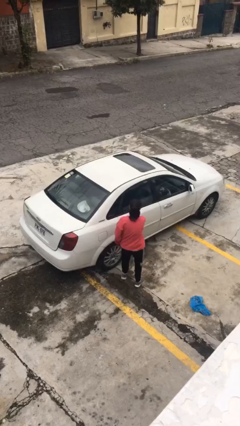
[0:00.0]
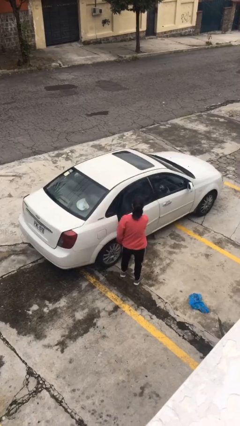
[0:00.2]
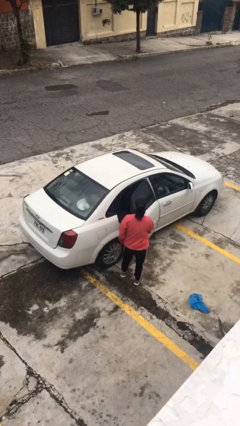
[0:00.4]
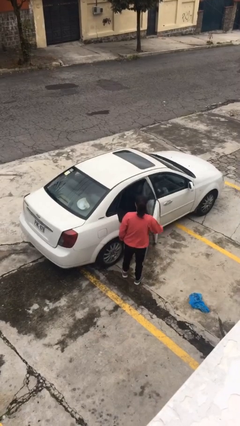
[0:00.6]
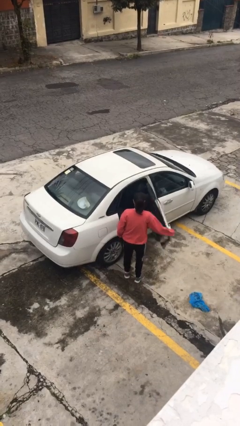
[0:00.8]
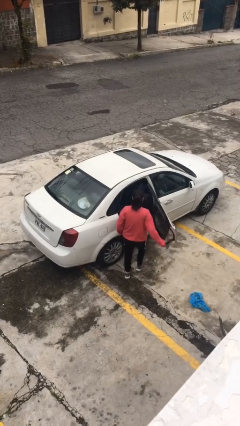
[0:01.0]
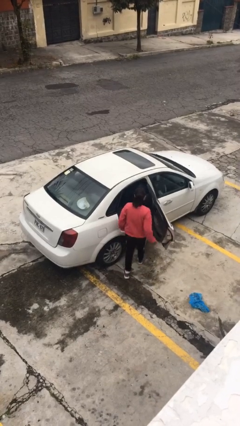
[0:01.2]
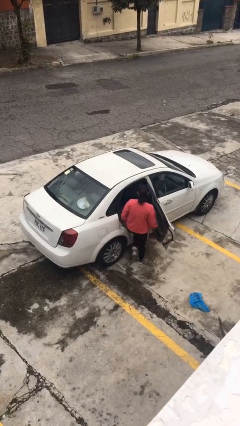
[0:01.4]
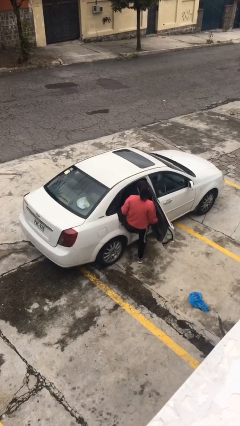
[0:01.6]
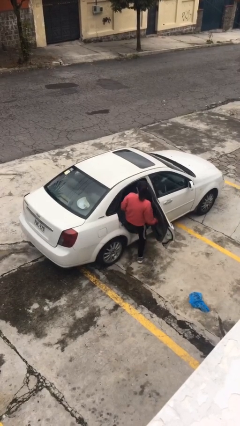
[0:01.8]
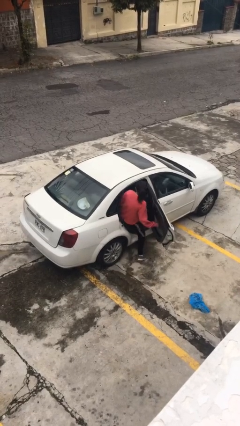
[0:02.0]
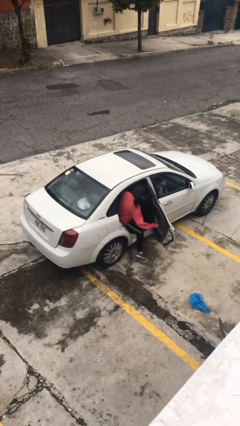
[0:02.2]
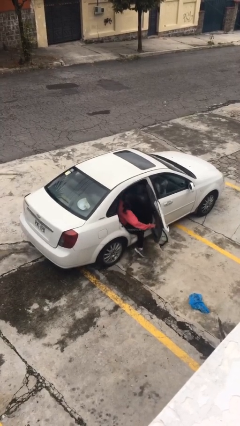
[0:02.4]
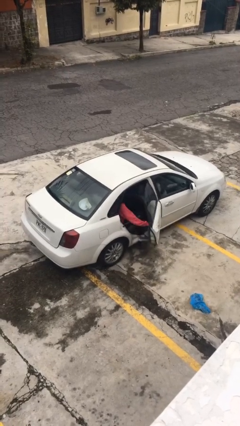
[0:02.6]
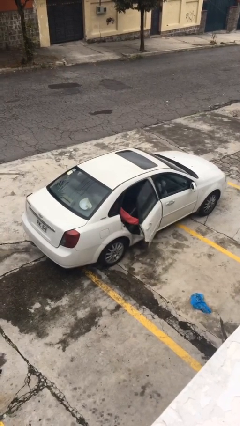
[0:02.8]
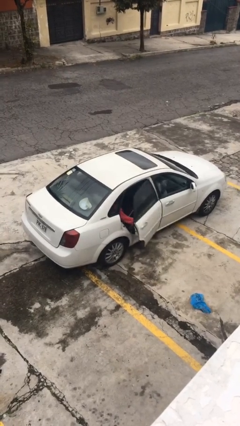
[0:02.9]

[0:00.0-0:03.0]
car picks up person

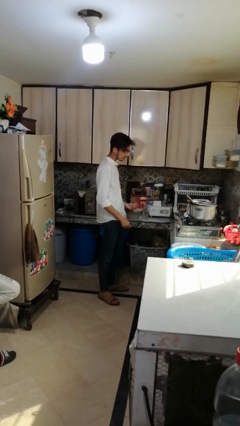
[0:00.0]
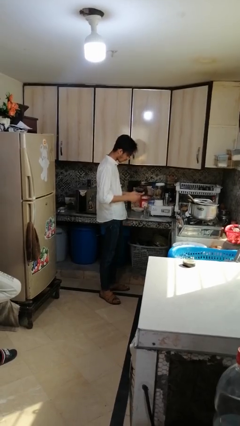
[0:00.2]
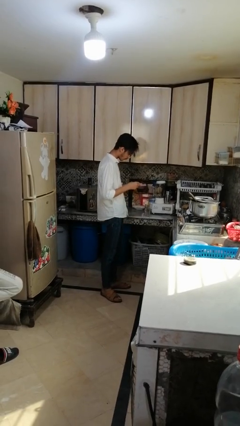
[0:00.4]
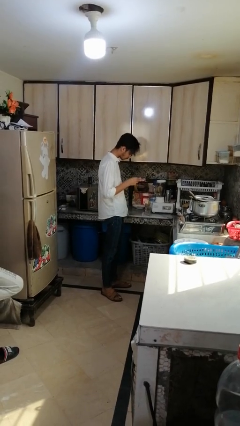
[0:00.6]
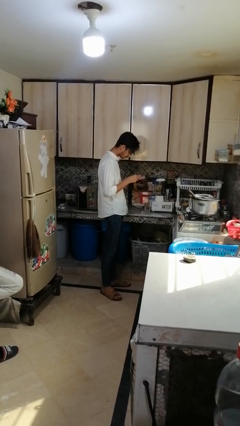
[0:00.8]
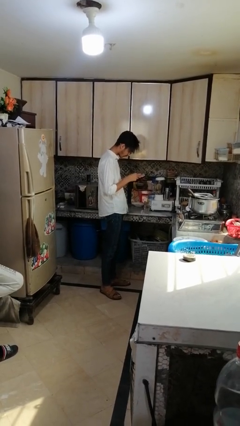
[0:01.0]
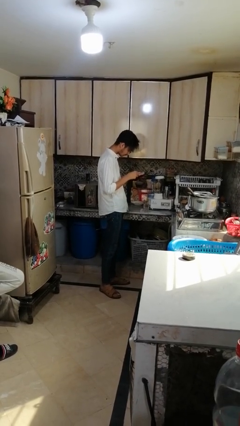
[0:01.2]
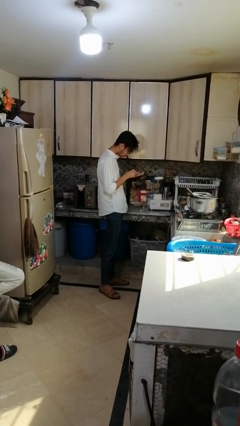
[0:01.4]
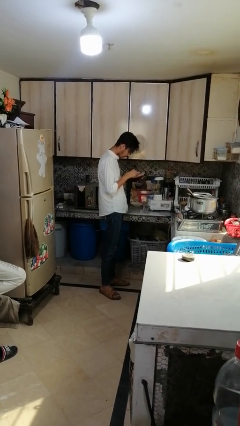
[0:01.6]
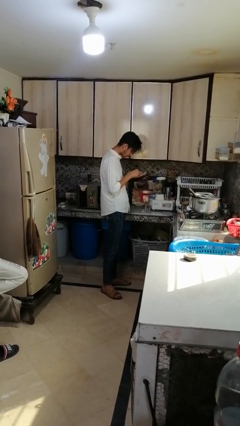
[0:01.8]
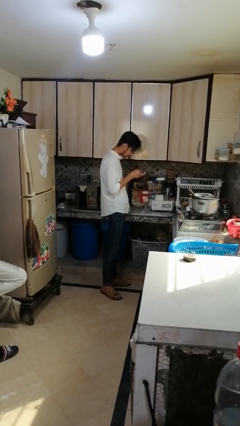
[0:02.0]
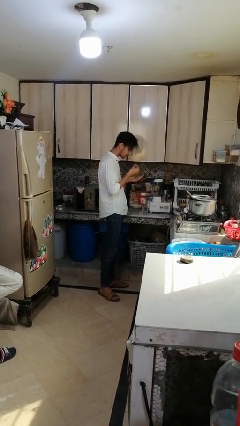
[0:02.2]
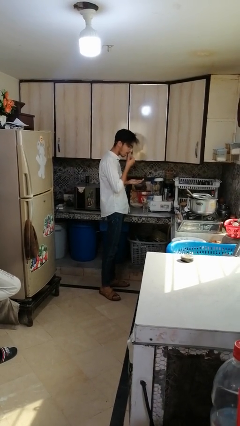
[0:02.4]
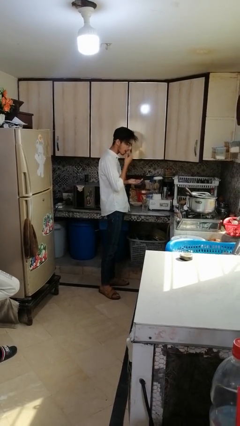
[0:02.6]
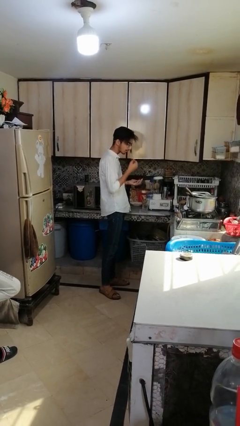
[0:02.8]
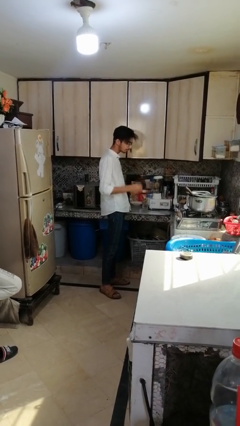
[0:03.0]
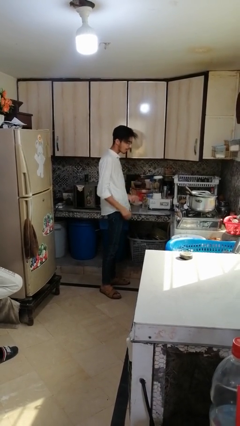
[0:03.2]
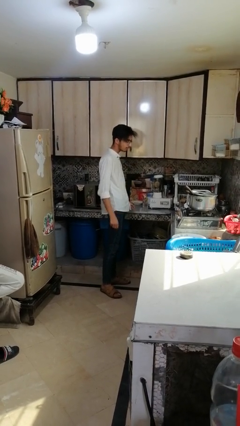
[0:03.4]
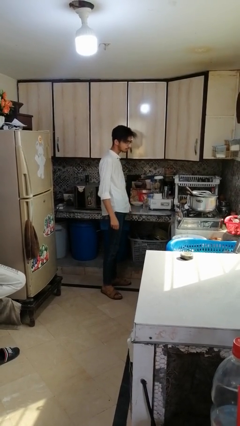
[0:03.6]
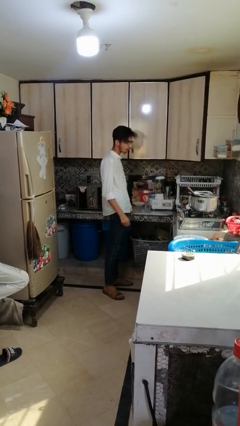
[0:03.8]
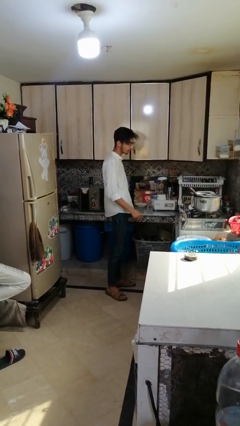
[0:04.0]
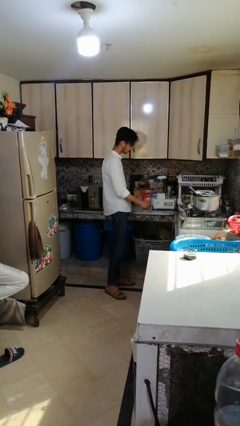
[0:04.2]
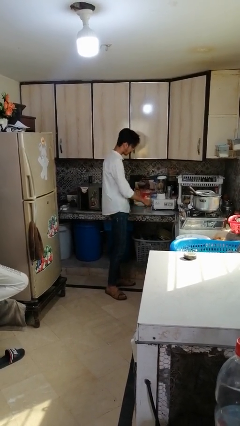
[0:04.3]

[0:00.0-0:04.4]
person takes medicine pills

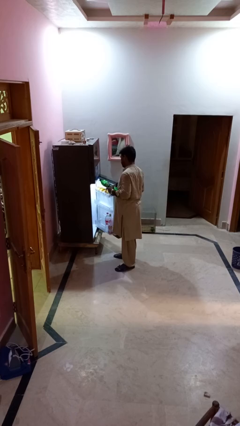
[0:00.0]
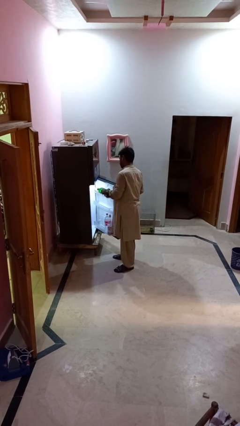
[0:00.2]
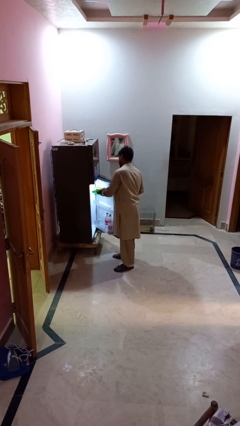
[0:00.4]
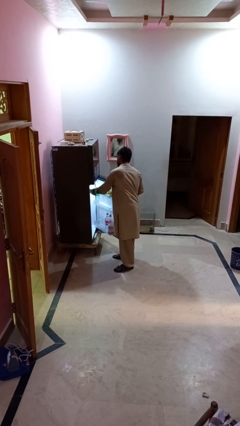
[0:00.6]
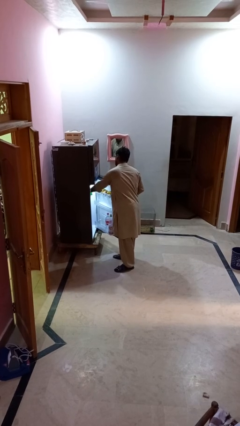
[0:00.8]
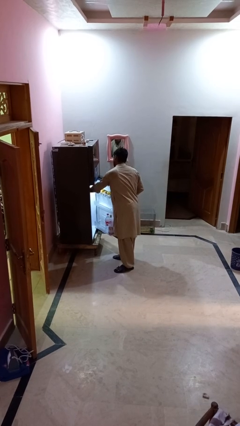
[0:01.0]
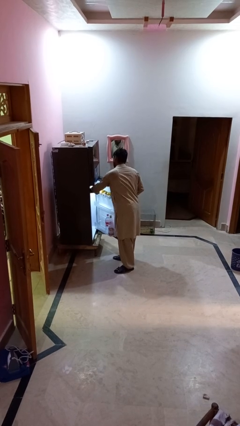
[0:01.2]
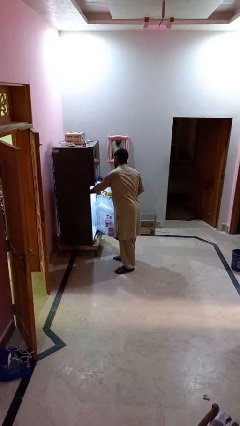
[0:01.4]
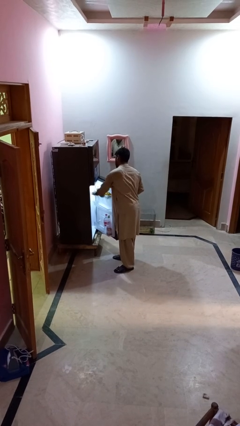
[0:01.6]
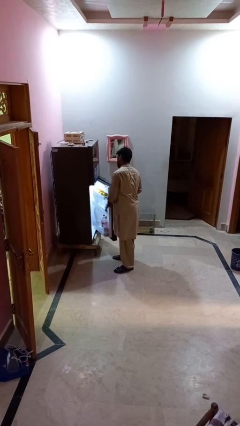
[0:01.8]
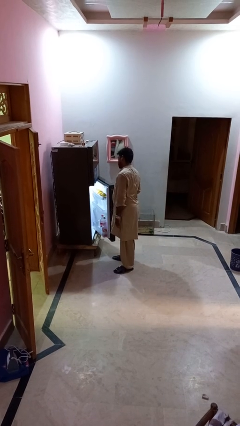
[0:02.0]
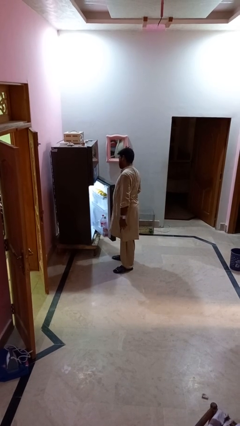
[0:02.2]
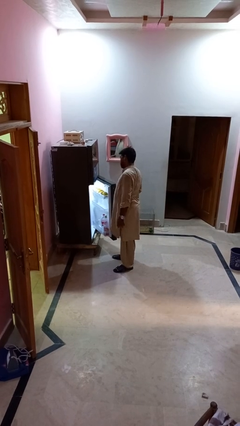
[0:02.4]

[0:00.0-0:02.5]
person puts object into refrigerator

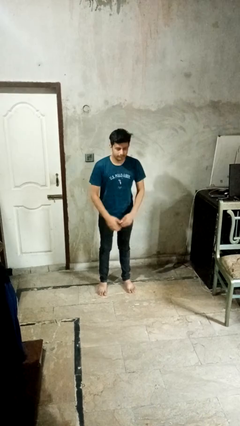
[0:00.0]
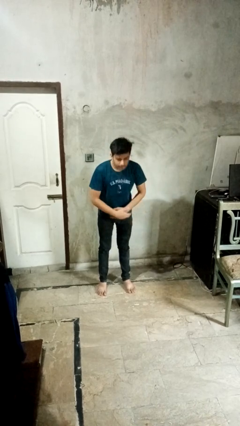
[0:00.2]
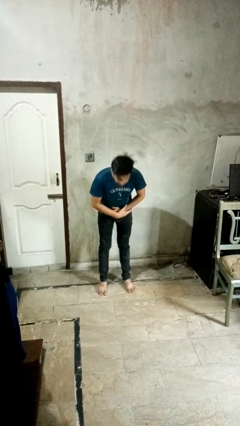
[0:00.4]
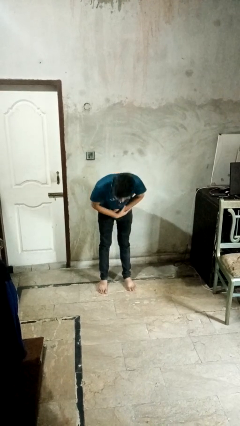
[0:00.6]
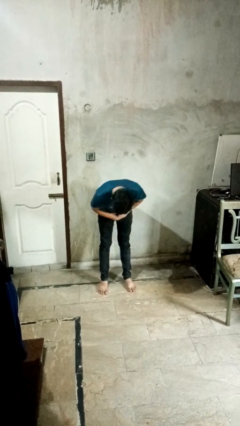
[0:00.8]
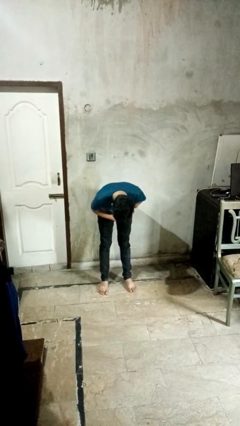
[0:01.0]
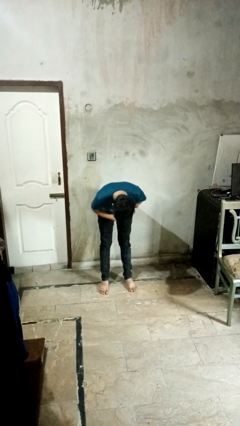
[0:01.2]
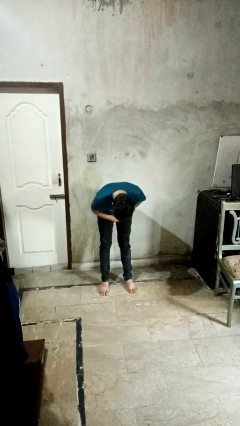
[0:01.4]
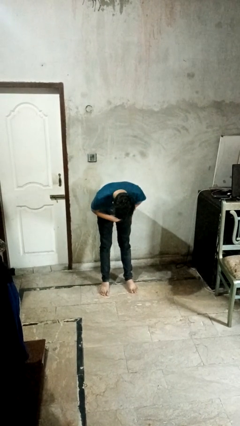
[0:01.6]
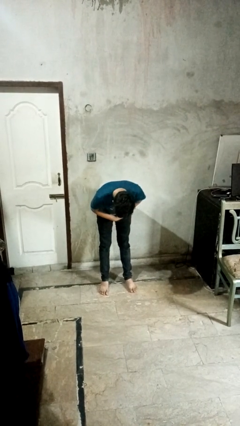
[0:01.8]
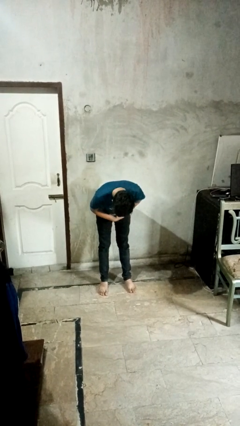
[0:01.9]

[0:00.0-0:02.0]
person bows

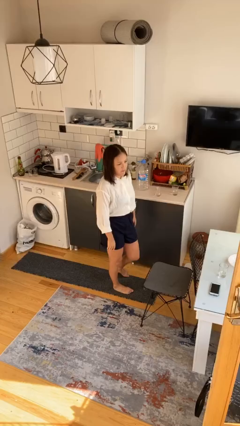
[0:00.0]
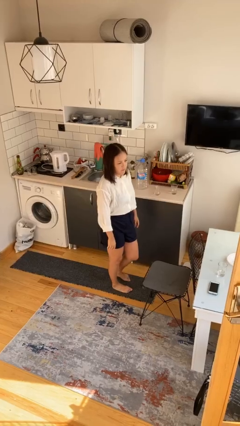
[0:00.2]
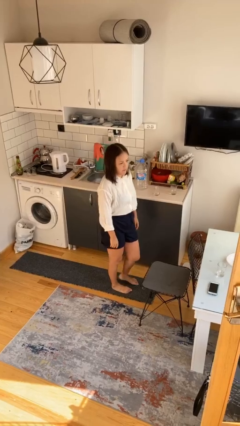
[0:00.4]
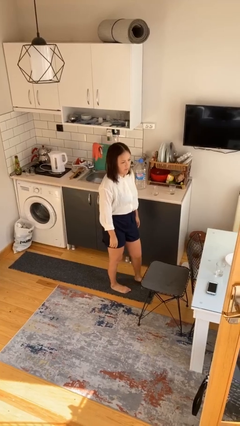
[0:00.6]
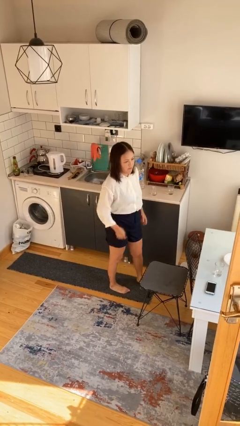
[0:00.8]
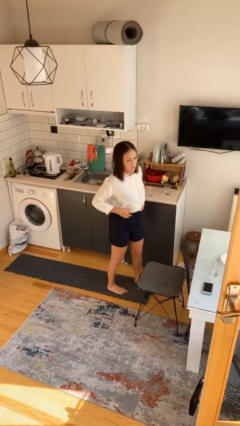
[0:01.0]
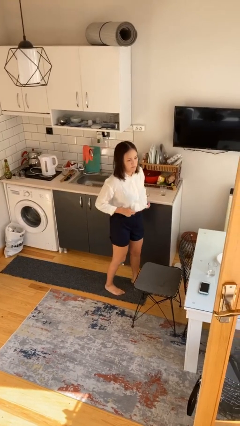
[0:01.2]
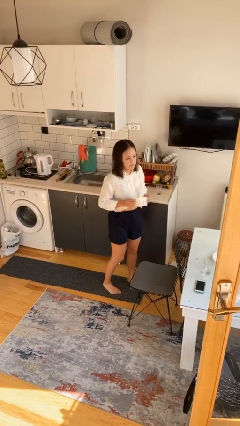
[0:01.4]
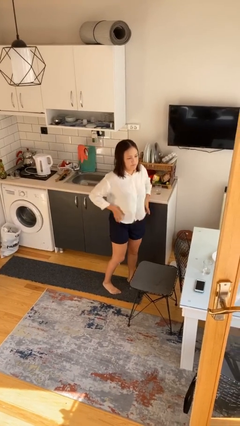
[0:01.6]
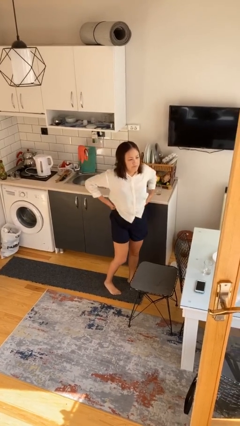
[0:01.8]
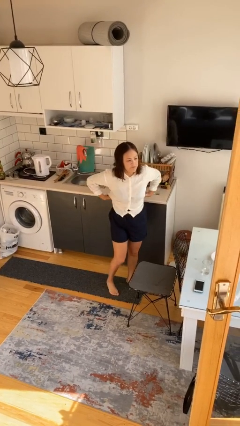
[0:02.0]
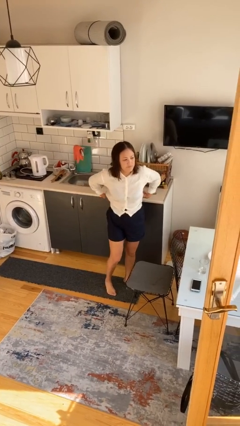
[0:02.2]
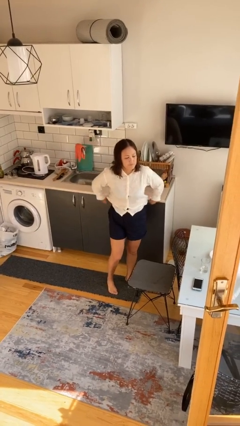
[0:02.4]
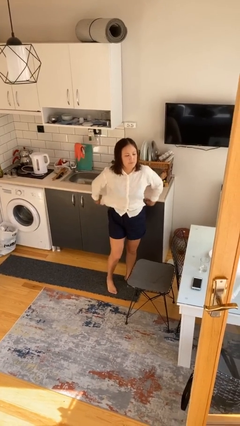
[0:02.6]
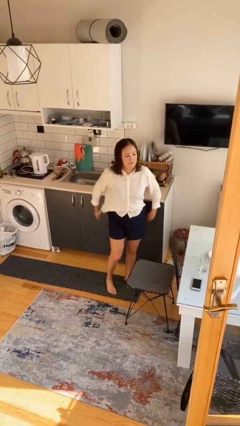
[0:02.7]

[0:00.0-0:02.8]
person untucks shirt

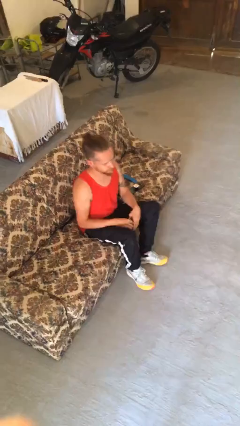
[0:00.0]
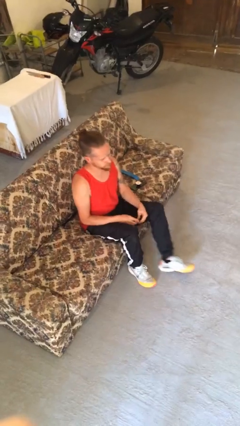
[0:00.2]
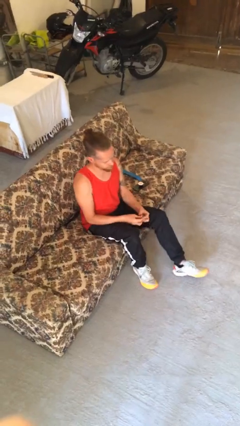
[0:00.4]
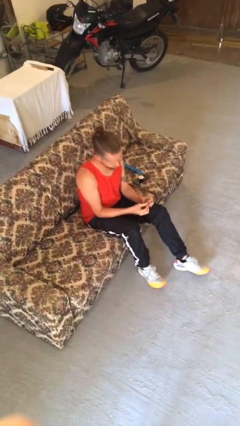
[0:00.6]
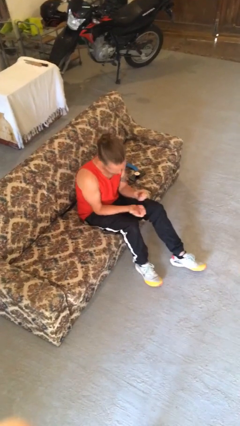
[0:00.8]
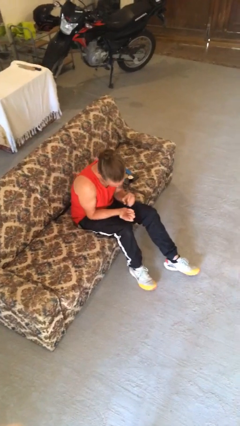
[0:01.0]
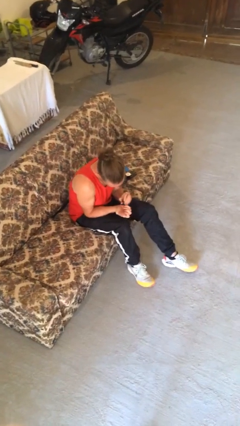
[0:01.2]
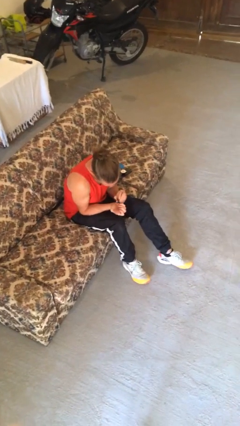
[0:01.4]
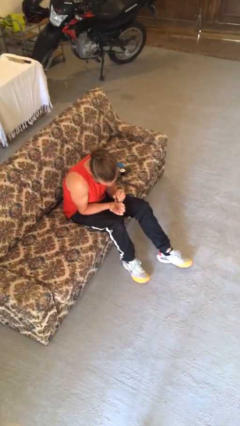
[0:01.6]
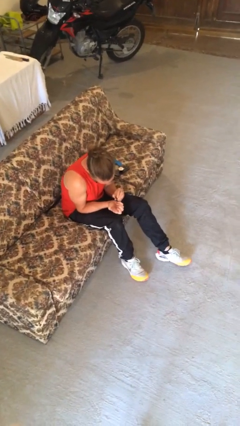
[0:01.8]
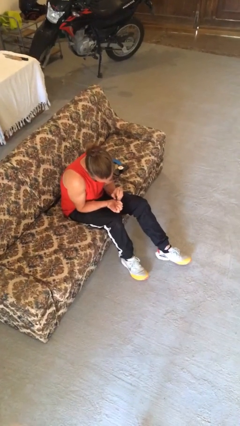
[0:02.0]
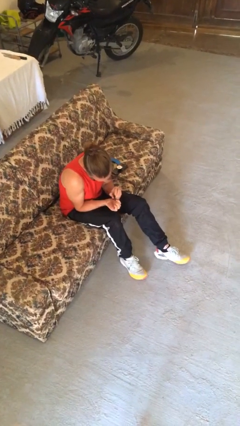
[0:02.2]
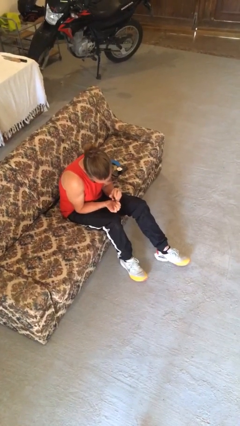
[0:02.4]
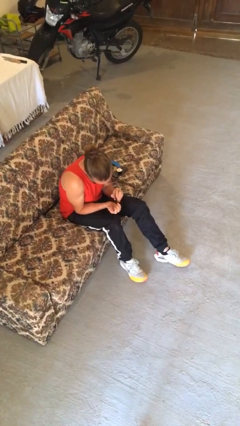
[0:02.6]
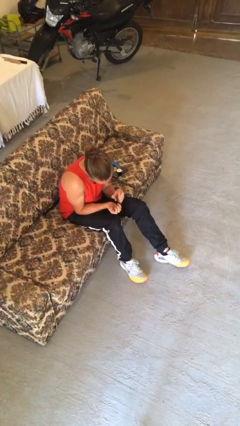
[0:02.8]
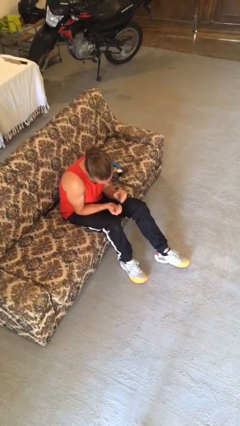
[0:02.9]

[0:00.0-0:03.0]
person clips fingernails
